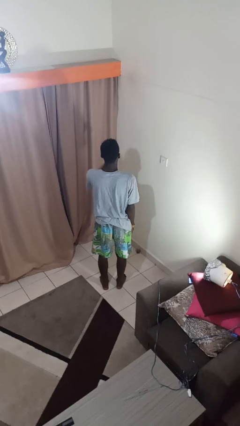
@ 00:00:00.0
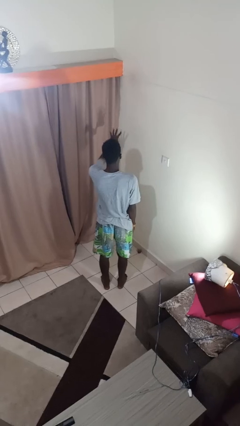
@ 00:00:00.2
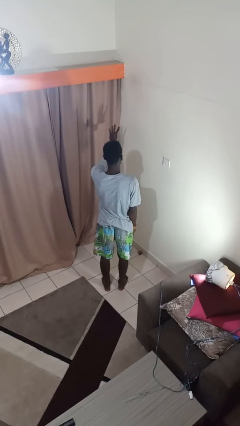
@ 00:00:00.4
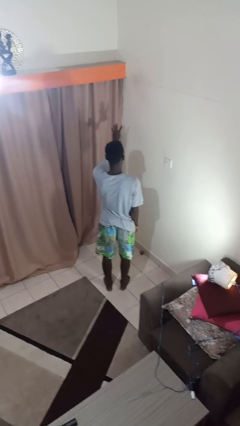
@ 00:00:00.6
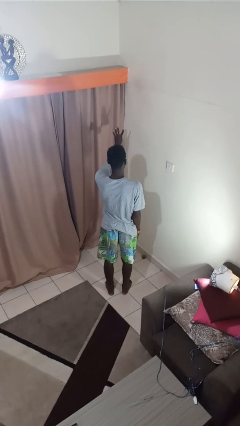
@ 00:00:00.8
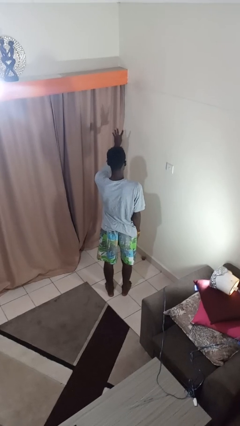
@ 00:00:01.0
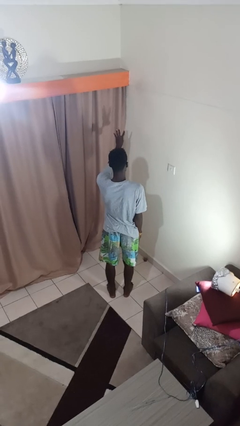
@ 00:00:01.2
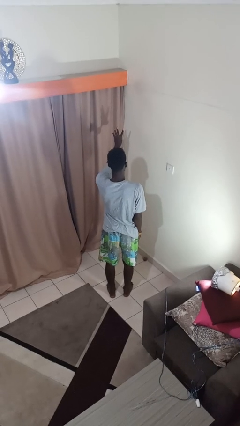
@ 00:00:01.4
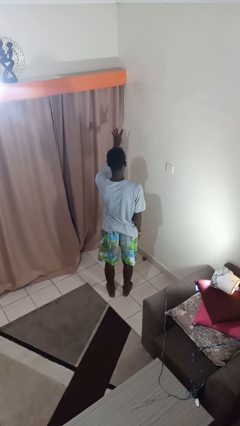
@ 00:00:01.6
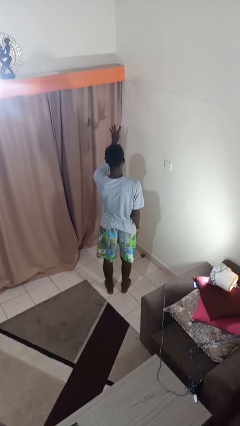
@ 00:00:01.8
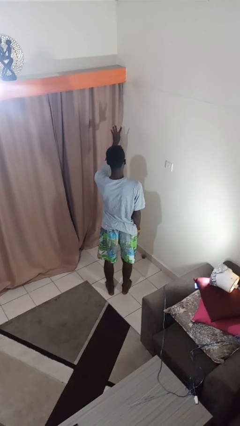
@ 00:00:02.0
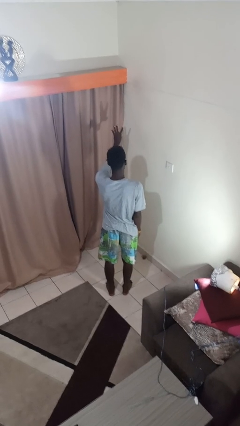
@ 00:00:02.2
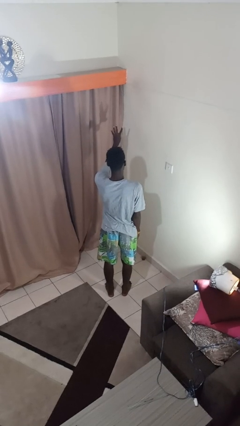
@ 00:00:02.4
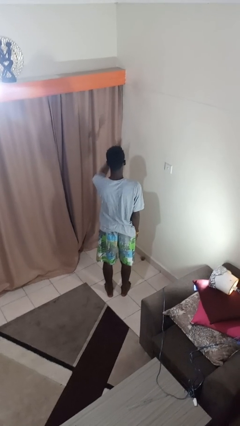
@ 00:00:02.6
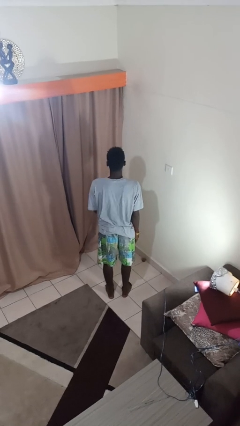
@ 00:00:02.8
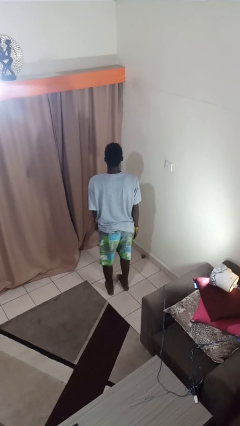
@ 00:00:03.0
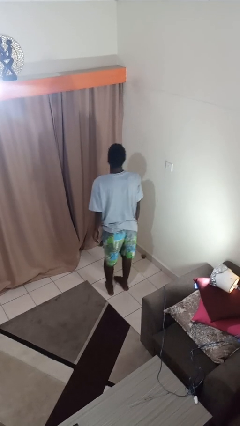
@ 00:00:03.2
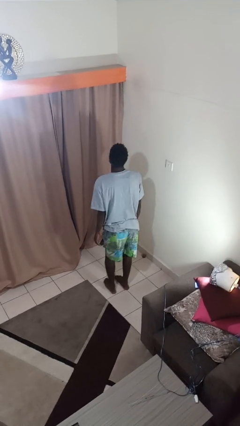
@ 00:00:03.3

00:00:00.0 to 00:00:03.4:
person gestures number four

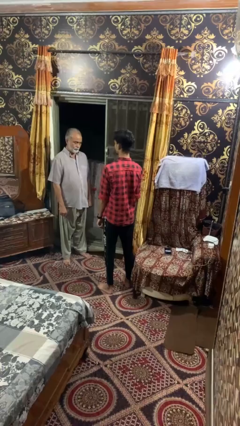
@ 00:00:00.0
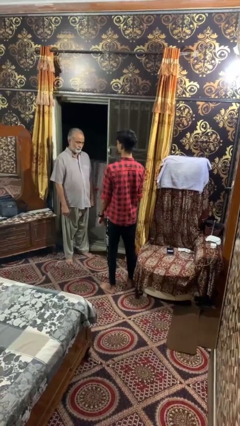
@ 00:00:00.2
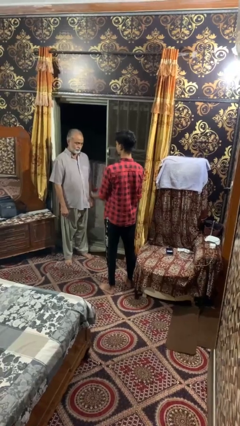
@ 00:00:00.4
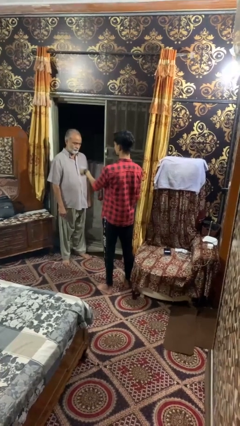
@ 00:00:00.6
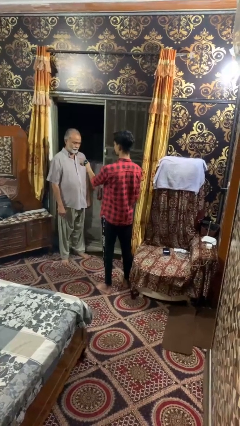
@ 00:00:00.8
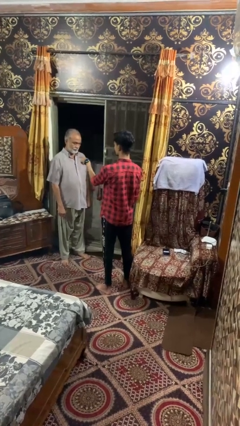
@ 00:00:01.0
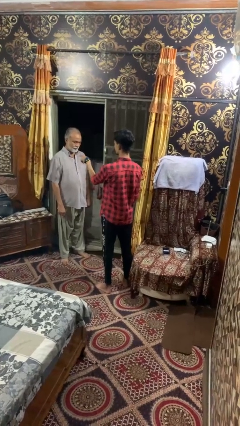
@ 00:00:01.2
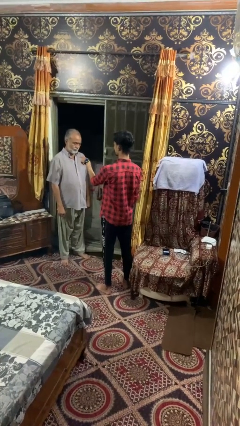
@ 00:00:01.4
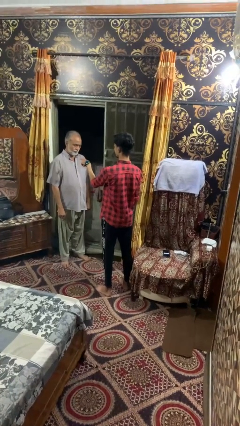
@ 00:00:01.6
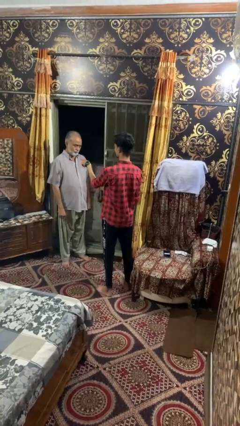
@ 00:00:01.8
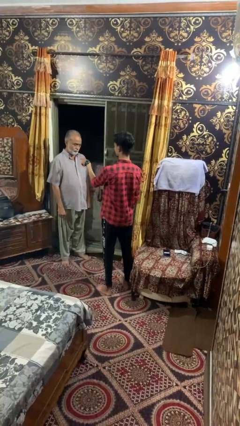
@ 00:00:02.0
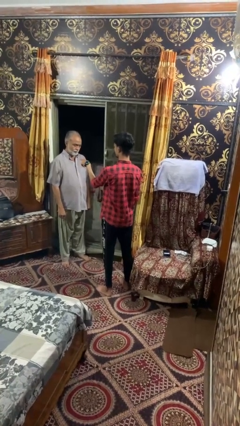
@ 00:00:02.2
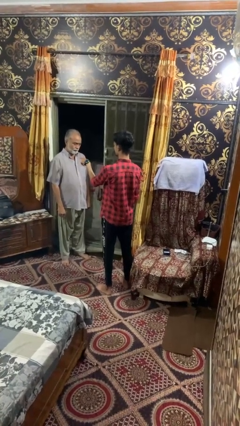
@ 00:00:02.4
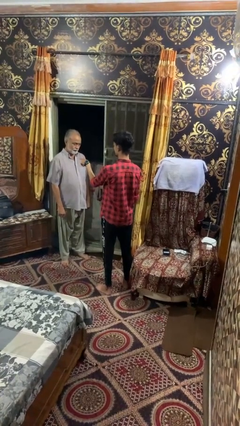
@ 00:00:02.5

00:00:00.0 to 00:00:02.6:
person points at person

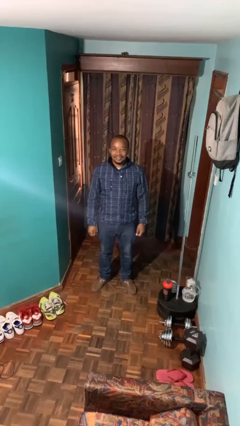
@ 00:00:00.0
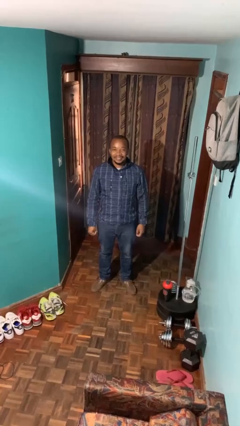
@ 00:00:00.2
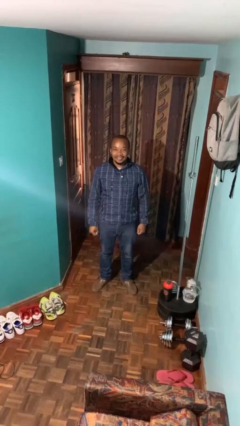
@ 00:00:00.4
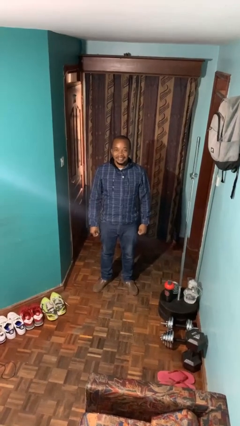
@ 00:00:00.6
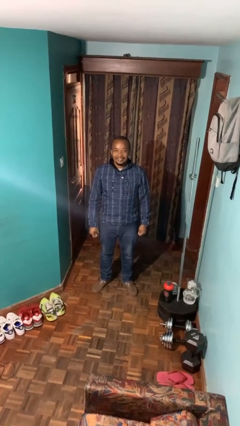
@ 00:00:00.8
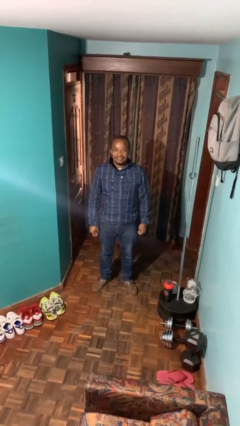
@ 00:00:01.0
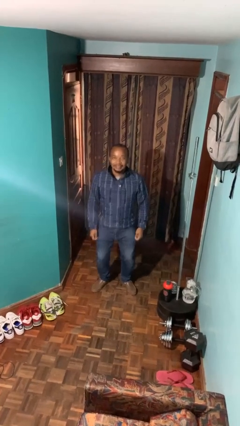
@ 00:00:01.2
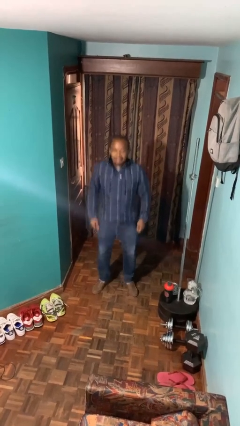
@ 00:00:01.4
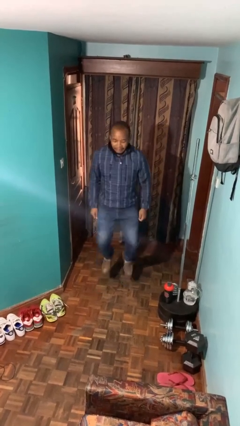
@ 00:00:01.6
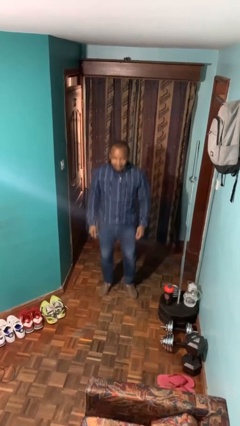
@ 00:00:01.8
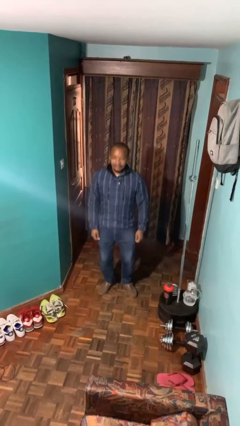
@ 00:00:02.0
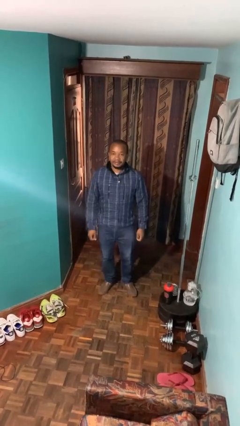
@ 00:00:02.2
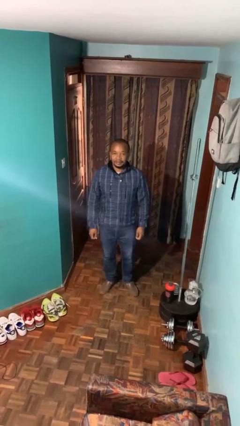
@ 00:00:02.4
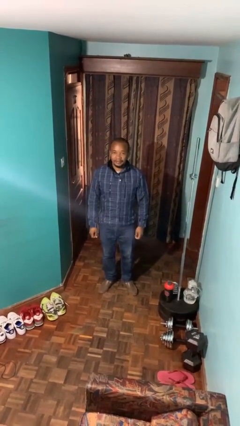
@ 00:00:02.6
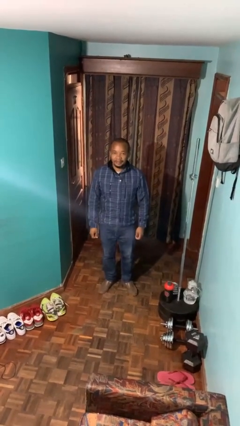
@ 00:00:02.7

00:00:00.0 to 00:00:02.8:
person jumps

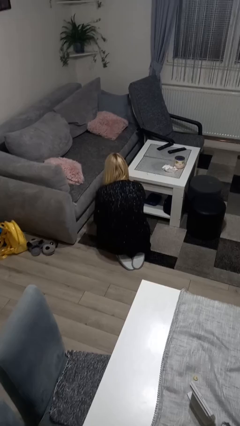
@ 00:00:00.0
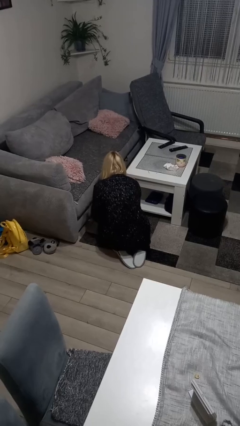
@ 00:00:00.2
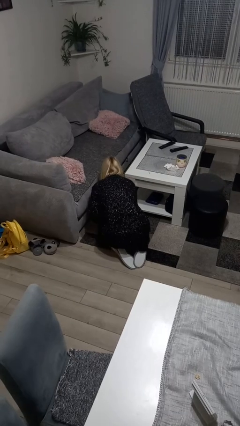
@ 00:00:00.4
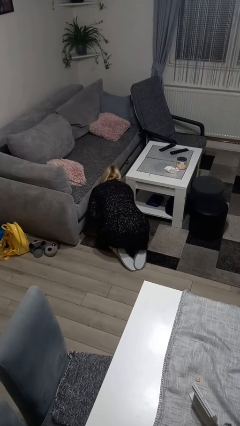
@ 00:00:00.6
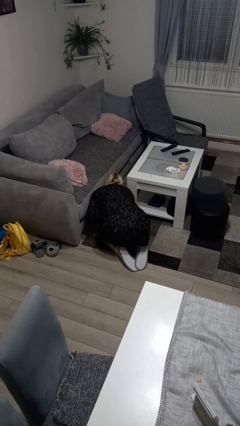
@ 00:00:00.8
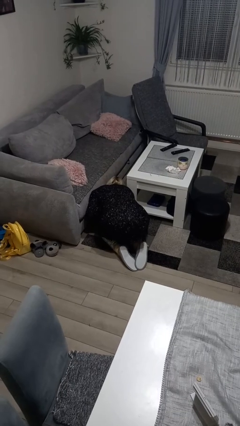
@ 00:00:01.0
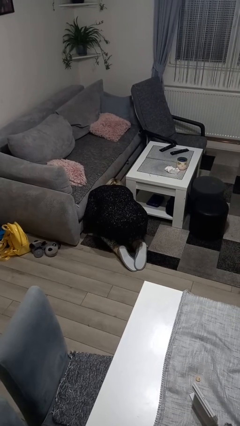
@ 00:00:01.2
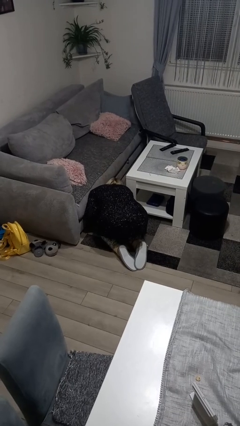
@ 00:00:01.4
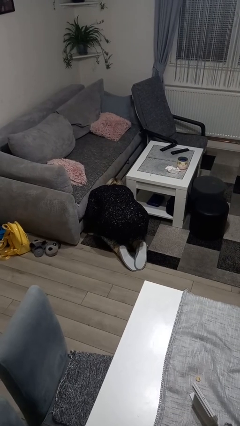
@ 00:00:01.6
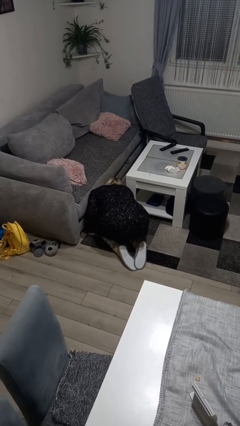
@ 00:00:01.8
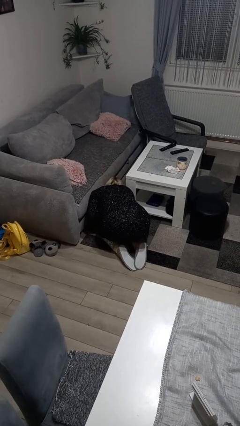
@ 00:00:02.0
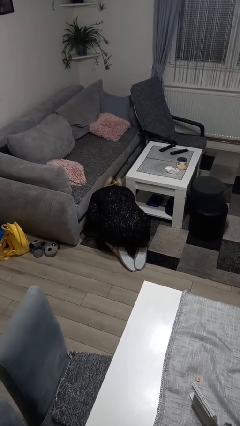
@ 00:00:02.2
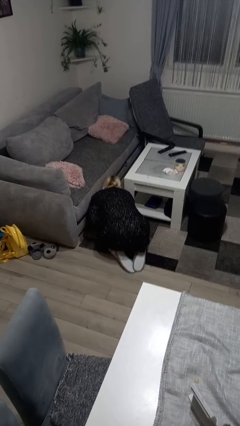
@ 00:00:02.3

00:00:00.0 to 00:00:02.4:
person searches under couch

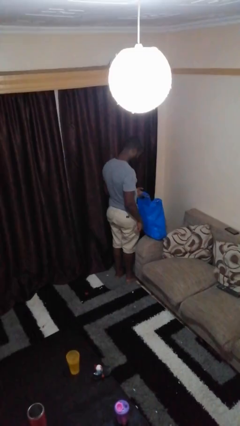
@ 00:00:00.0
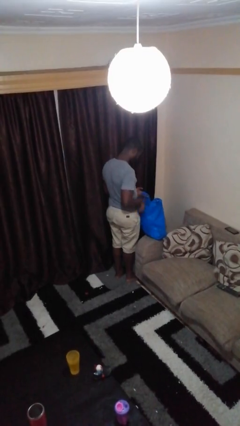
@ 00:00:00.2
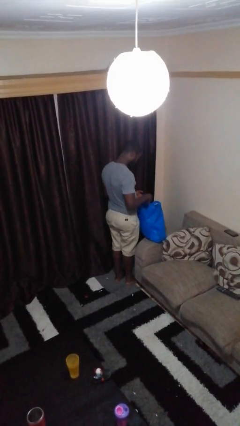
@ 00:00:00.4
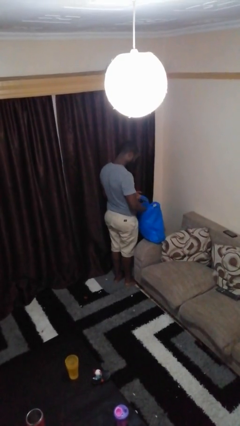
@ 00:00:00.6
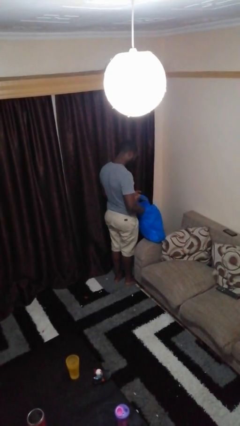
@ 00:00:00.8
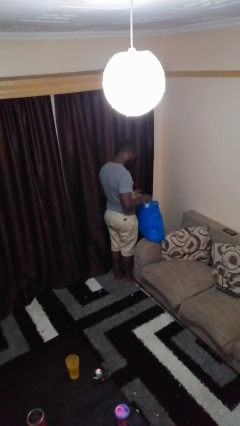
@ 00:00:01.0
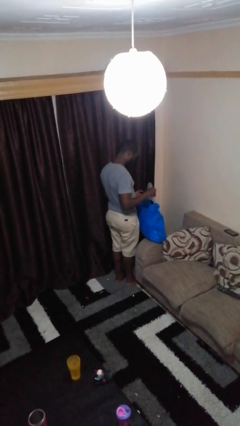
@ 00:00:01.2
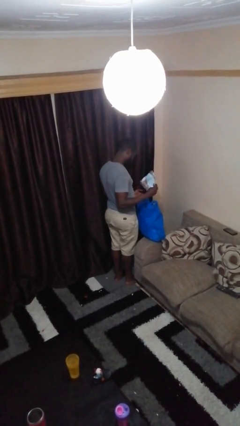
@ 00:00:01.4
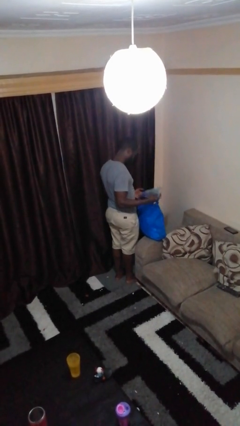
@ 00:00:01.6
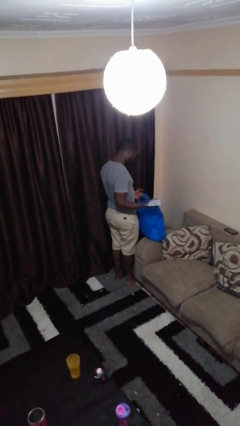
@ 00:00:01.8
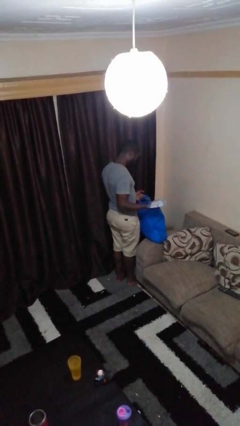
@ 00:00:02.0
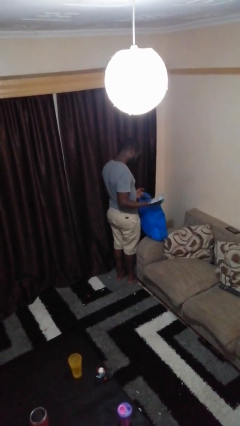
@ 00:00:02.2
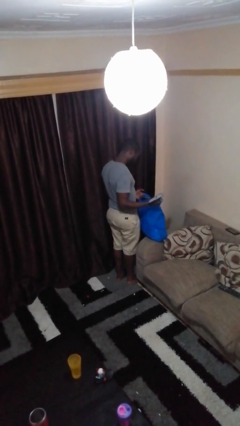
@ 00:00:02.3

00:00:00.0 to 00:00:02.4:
person takes object from bag

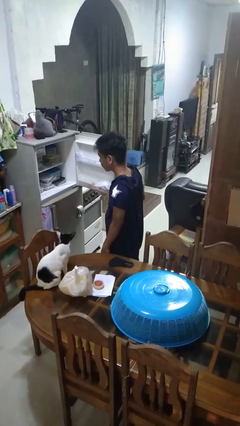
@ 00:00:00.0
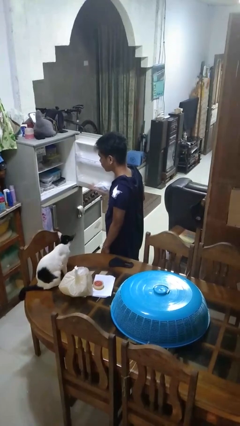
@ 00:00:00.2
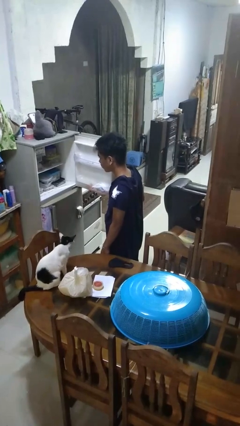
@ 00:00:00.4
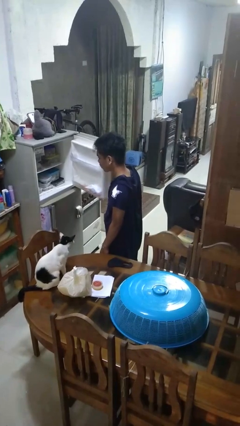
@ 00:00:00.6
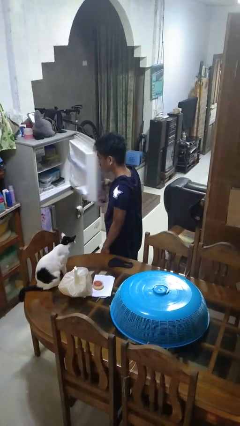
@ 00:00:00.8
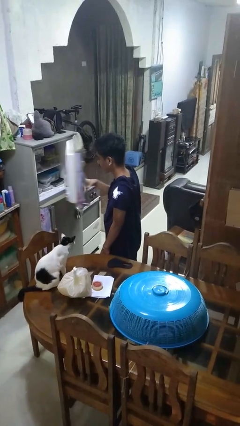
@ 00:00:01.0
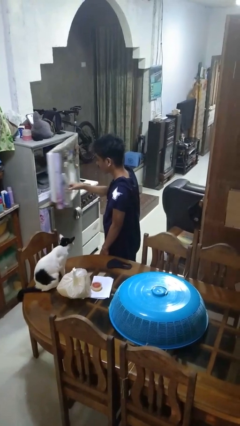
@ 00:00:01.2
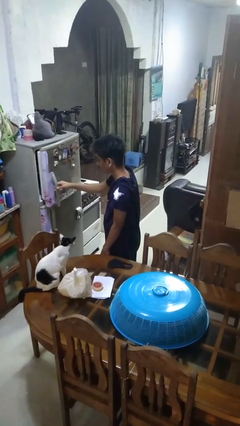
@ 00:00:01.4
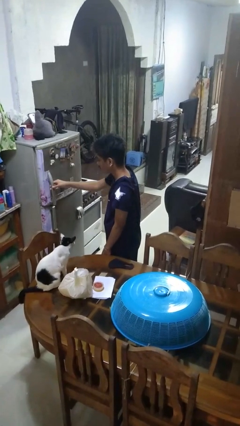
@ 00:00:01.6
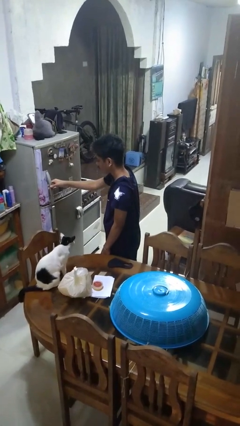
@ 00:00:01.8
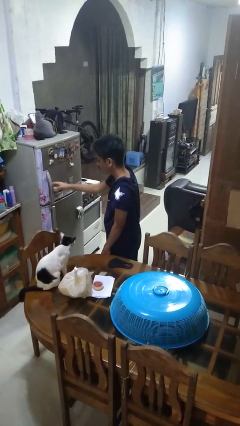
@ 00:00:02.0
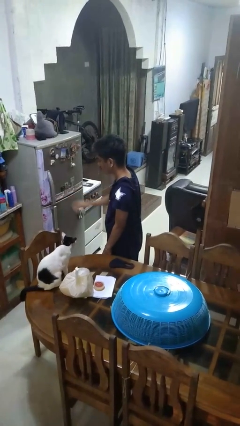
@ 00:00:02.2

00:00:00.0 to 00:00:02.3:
person closes refrigerator

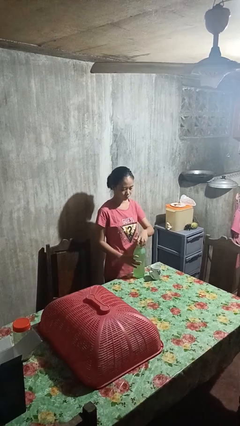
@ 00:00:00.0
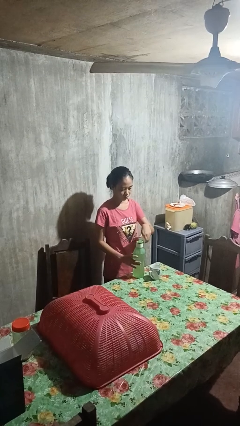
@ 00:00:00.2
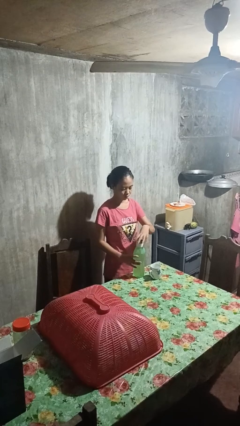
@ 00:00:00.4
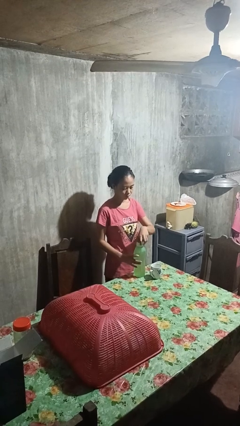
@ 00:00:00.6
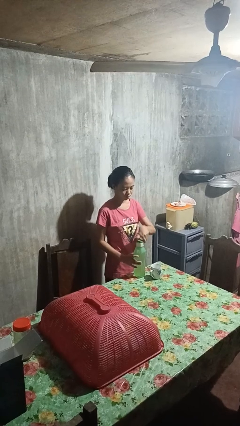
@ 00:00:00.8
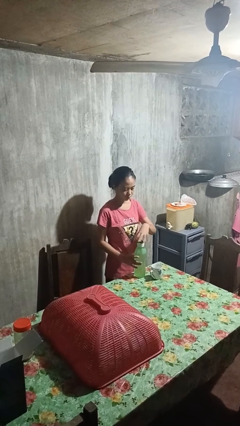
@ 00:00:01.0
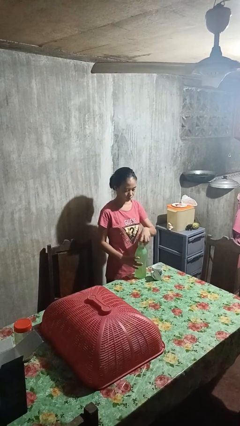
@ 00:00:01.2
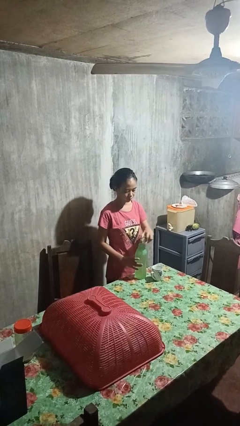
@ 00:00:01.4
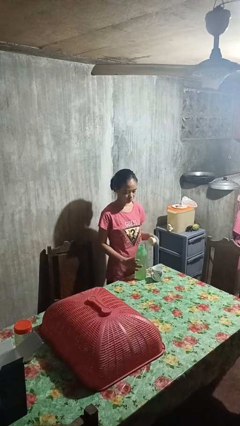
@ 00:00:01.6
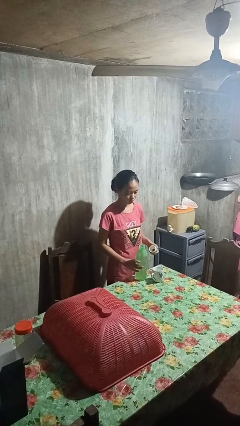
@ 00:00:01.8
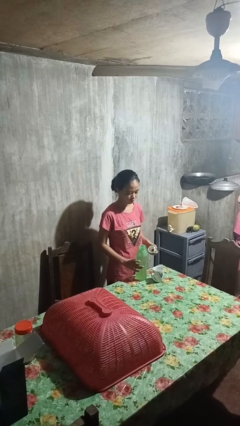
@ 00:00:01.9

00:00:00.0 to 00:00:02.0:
person unscrews lid from bottle
